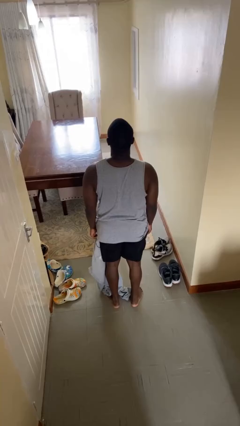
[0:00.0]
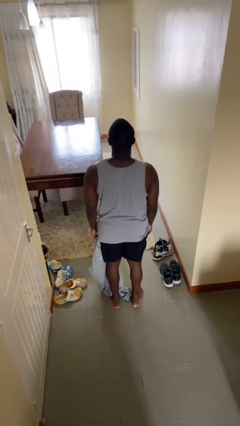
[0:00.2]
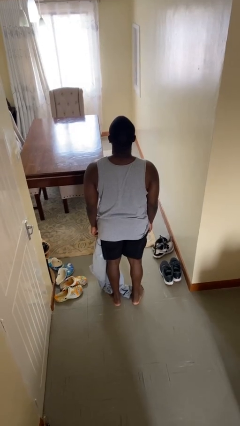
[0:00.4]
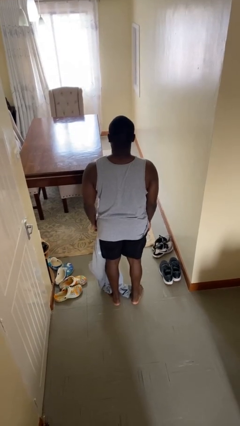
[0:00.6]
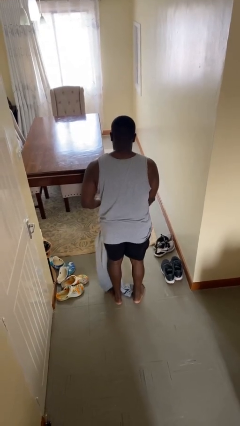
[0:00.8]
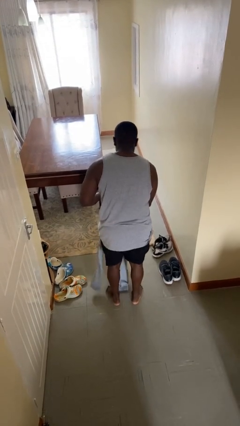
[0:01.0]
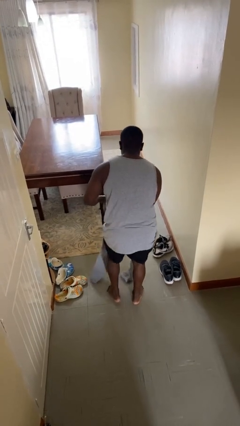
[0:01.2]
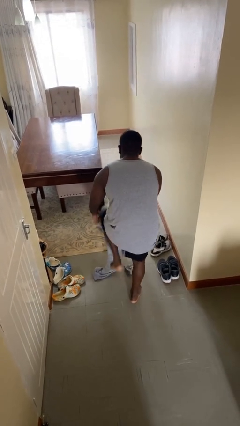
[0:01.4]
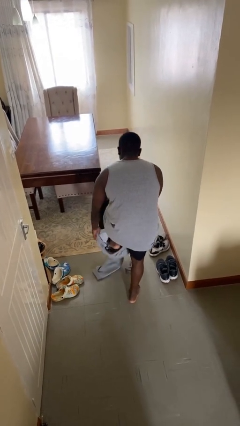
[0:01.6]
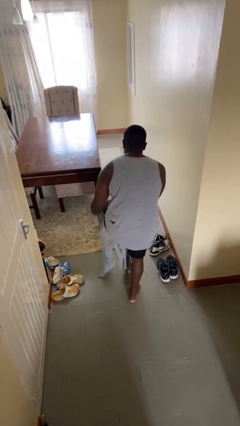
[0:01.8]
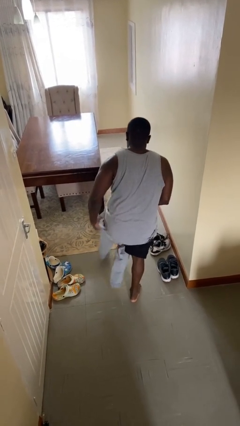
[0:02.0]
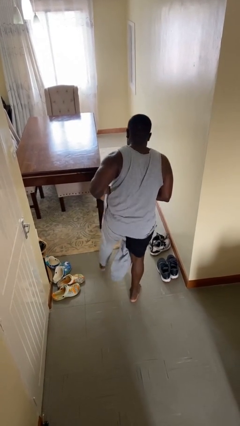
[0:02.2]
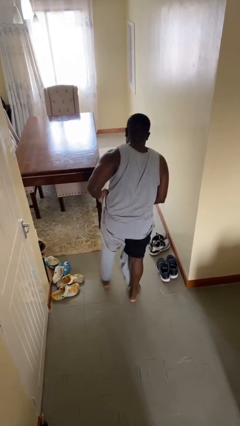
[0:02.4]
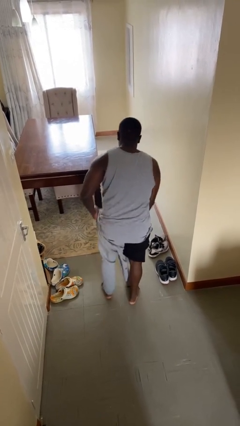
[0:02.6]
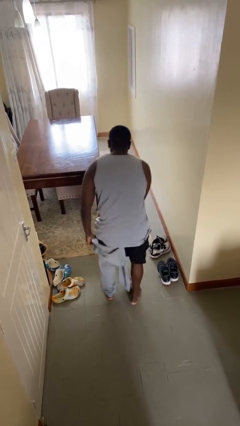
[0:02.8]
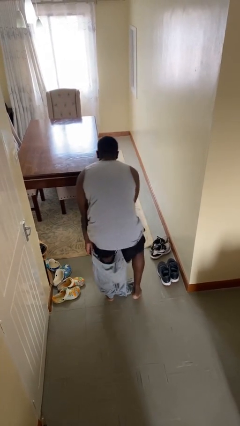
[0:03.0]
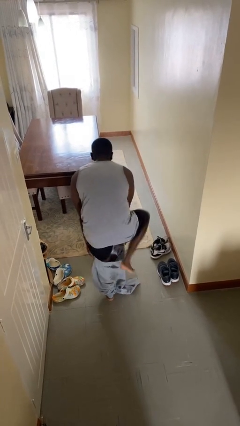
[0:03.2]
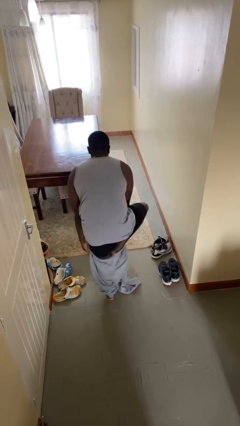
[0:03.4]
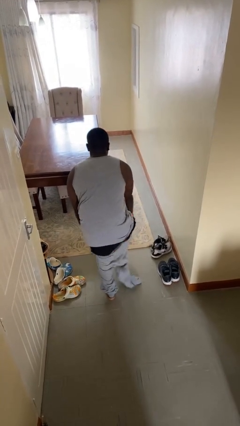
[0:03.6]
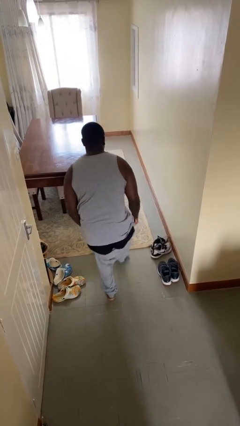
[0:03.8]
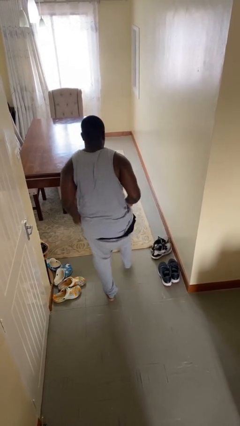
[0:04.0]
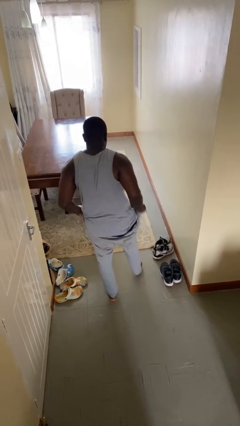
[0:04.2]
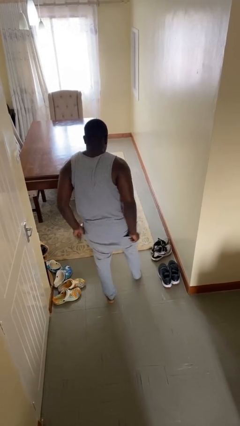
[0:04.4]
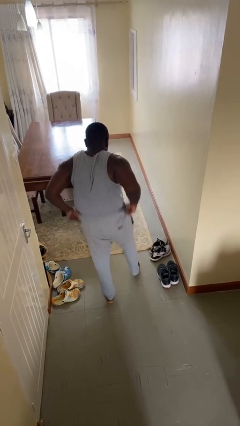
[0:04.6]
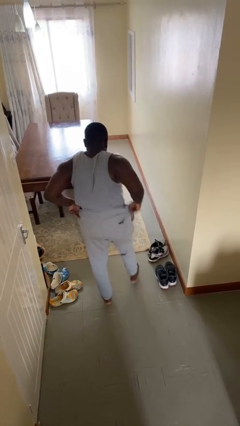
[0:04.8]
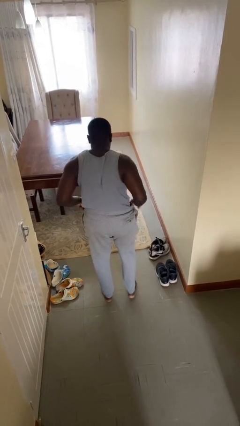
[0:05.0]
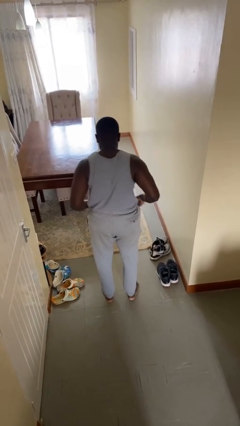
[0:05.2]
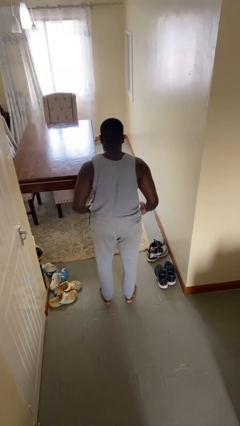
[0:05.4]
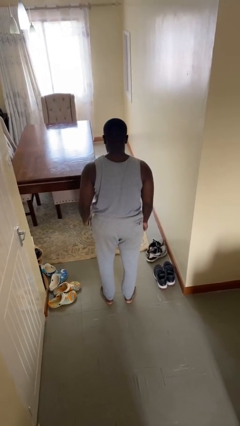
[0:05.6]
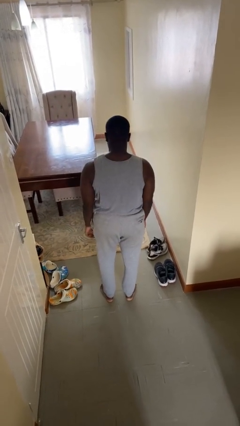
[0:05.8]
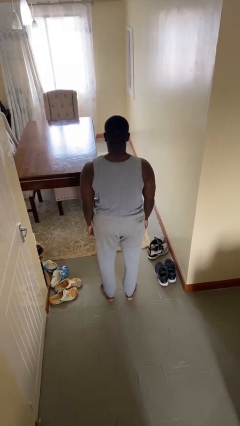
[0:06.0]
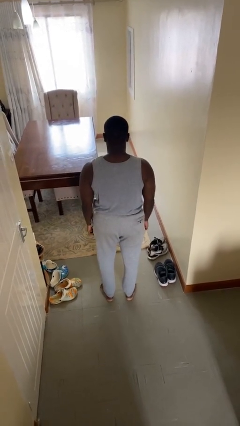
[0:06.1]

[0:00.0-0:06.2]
person puts on pants

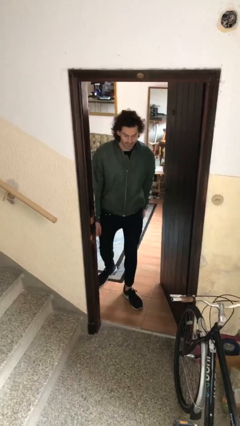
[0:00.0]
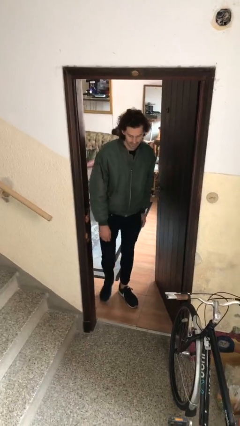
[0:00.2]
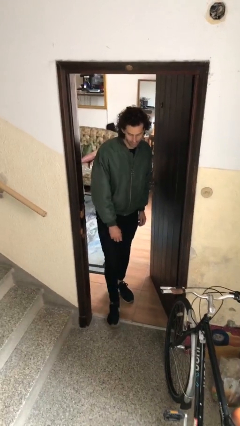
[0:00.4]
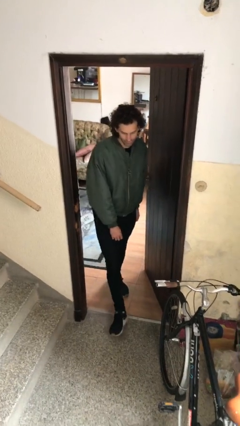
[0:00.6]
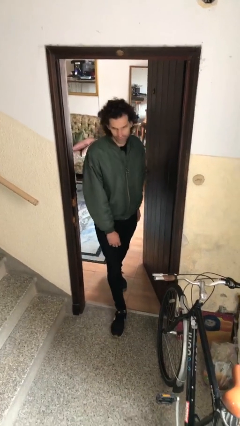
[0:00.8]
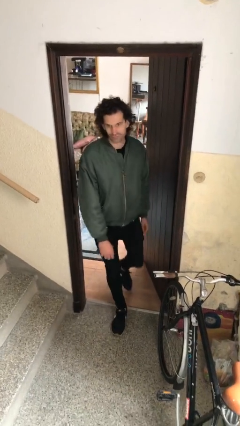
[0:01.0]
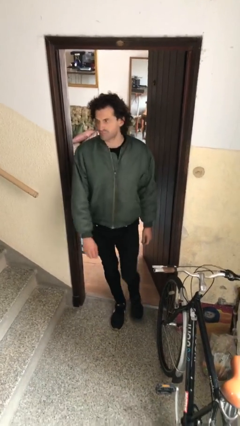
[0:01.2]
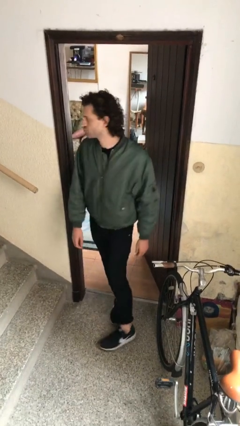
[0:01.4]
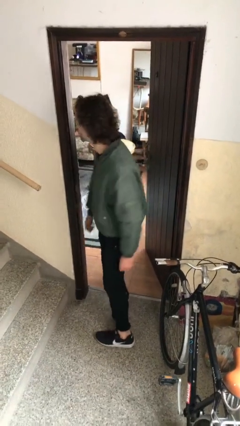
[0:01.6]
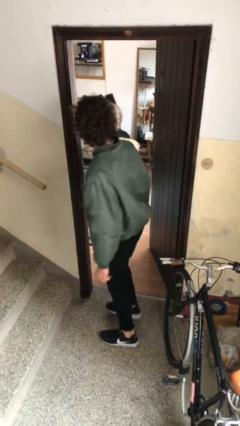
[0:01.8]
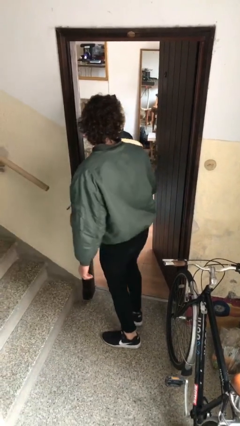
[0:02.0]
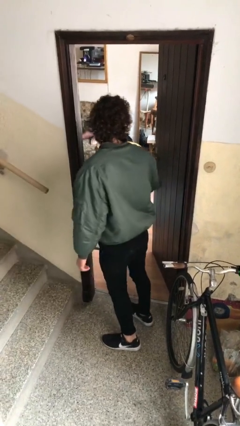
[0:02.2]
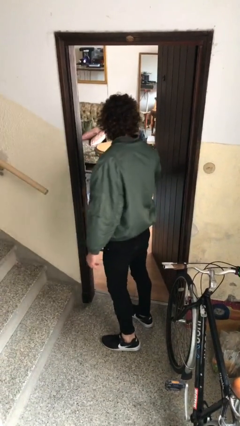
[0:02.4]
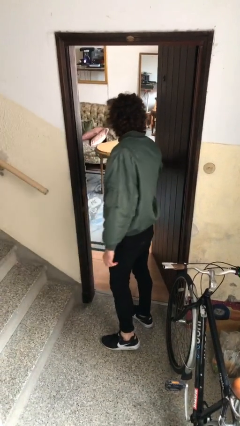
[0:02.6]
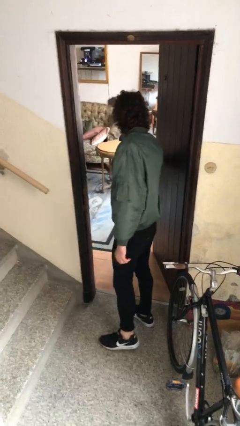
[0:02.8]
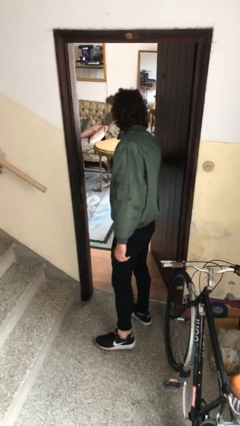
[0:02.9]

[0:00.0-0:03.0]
person enters scene through structure

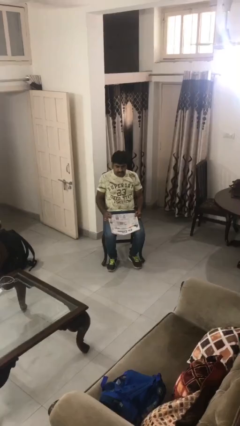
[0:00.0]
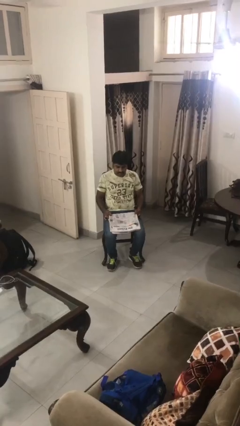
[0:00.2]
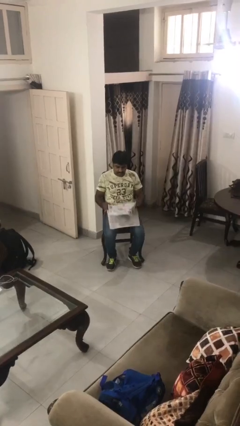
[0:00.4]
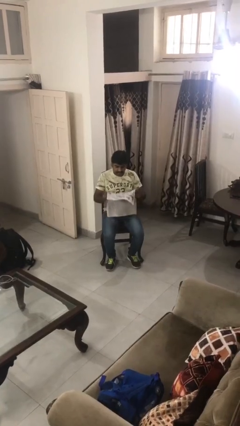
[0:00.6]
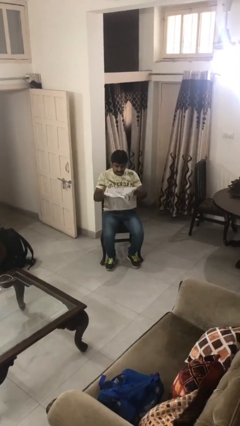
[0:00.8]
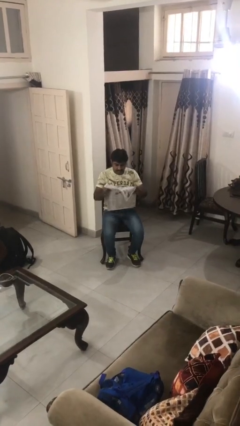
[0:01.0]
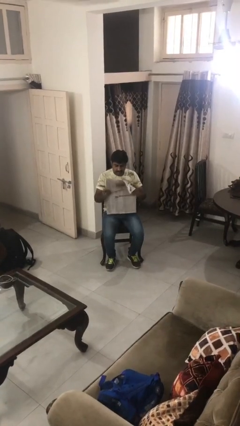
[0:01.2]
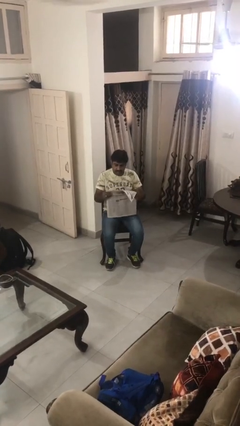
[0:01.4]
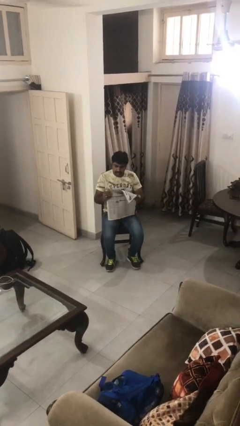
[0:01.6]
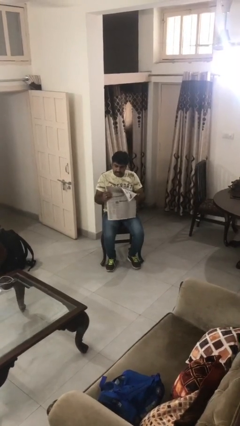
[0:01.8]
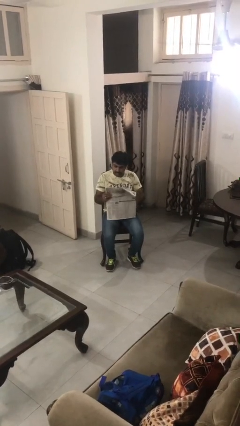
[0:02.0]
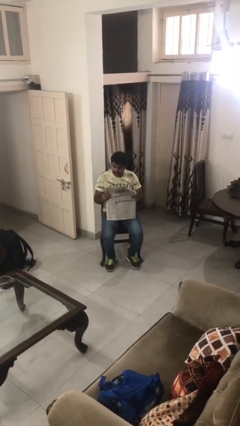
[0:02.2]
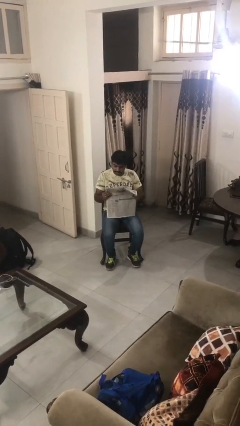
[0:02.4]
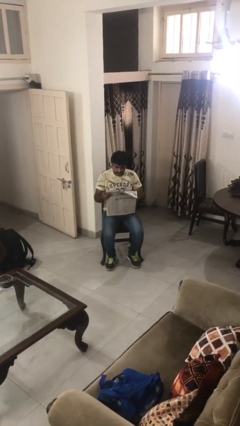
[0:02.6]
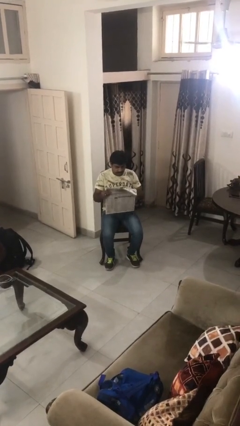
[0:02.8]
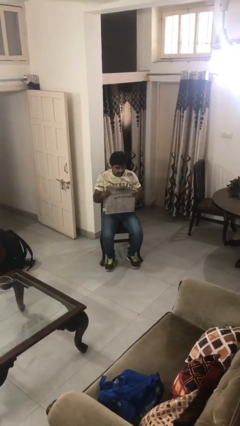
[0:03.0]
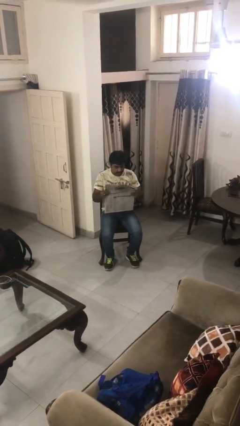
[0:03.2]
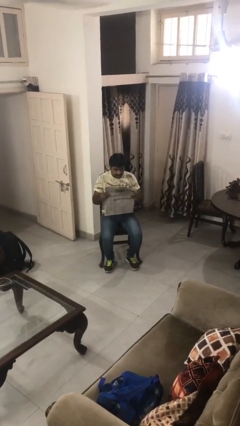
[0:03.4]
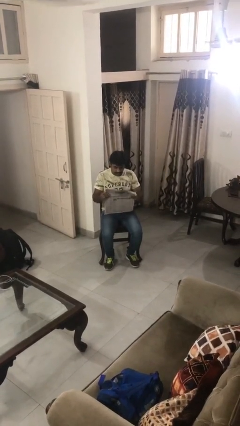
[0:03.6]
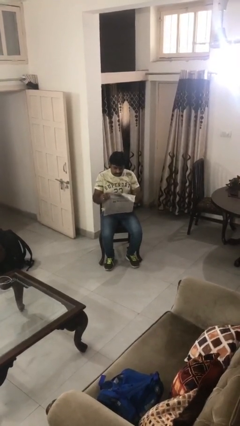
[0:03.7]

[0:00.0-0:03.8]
person reads newspaper

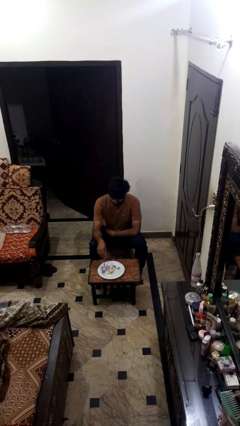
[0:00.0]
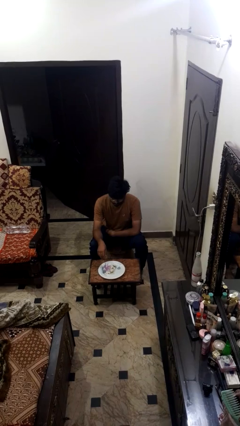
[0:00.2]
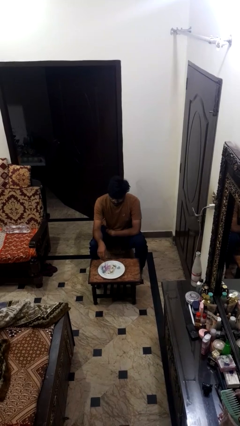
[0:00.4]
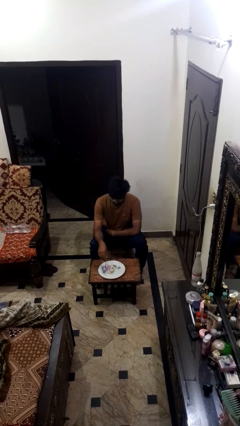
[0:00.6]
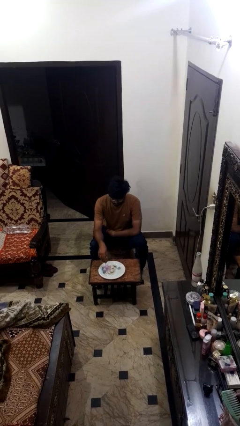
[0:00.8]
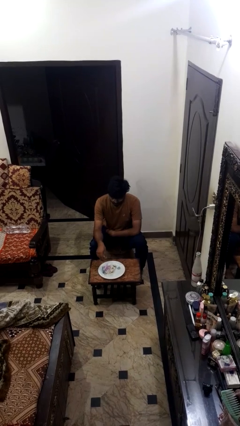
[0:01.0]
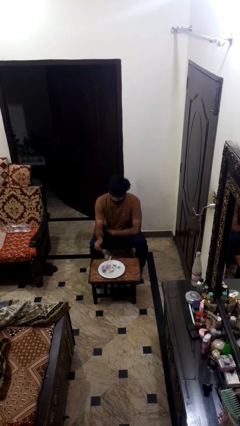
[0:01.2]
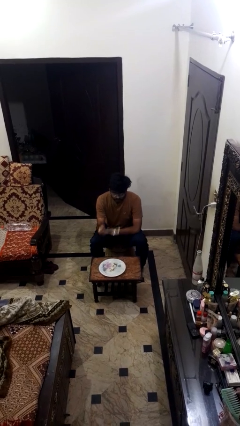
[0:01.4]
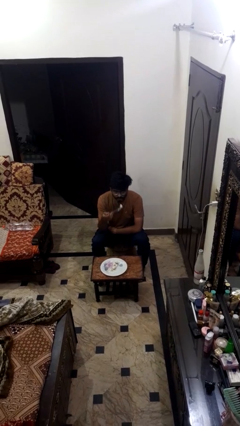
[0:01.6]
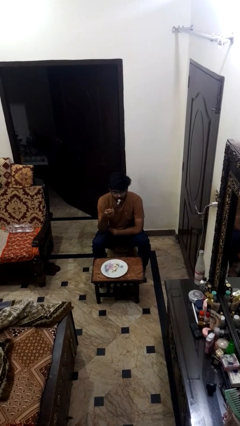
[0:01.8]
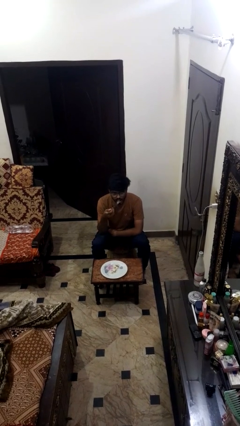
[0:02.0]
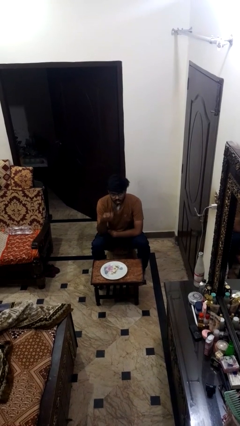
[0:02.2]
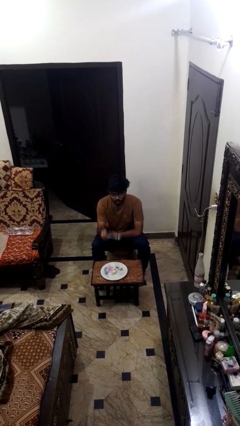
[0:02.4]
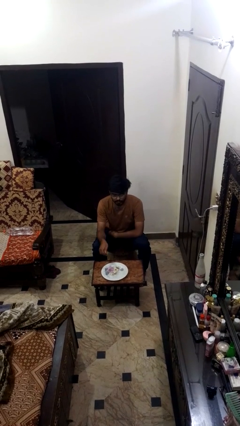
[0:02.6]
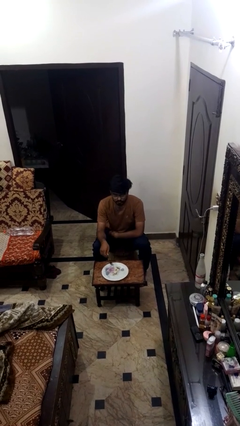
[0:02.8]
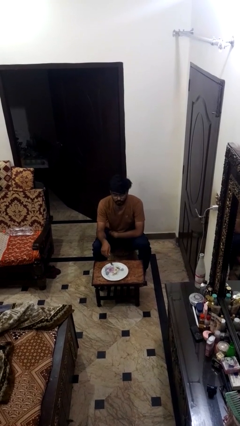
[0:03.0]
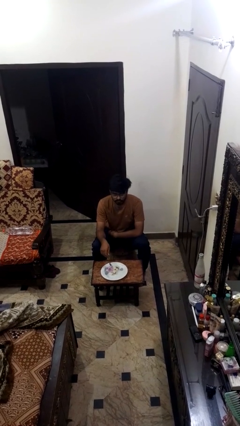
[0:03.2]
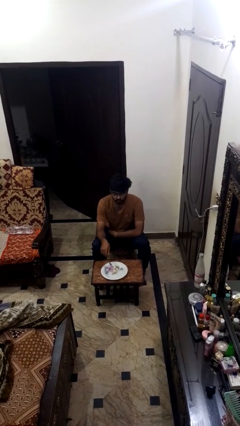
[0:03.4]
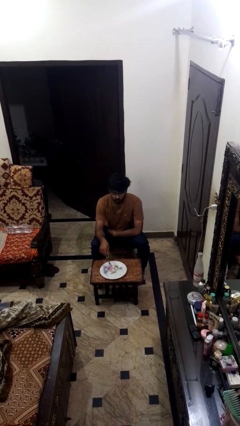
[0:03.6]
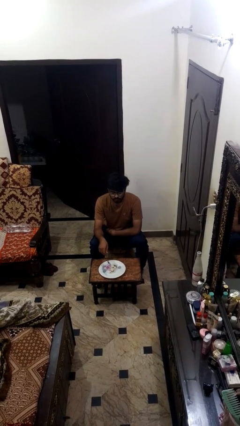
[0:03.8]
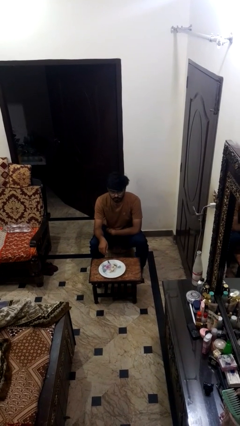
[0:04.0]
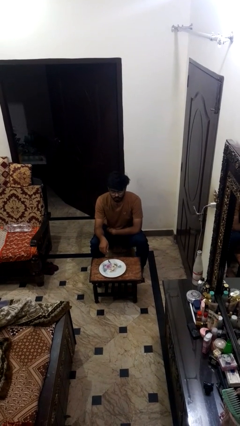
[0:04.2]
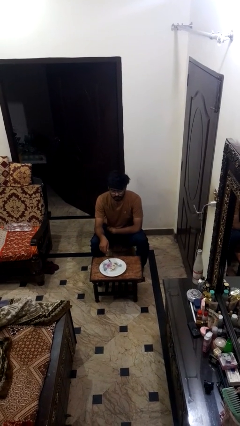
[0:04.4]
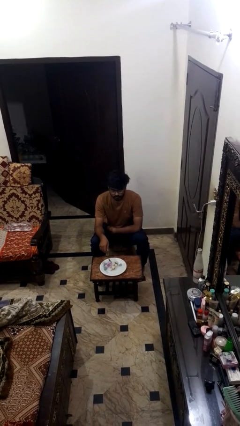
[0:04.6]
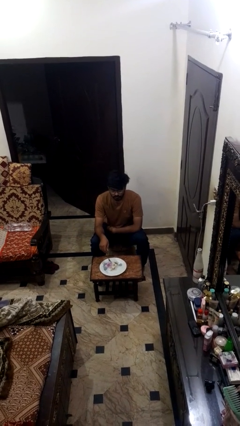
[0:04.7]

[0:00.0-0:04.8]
person eats with utensil

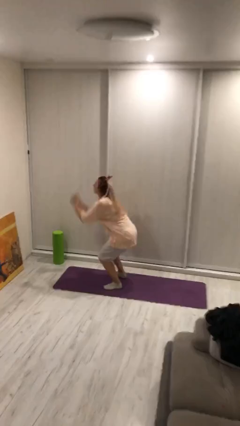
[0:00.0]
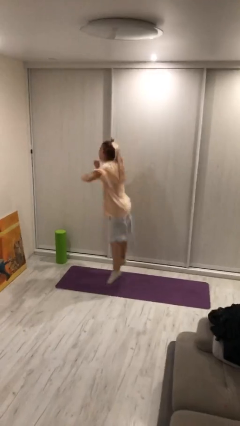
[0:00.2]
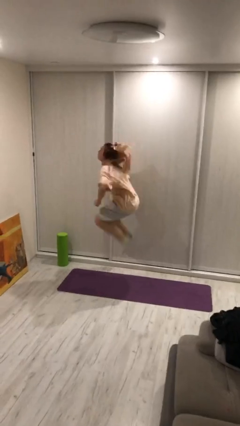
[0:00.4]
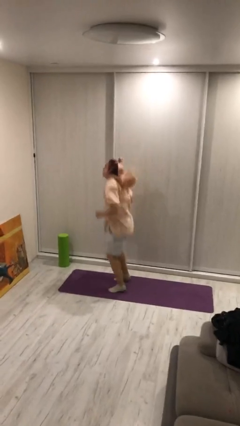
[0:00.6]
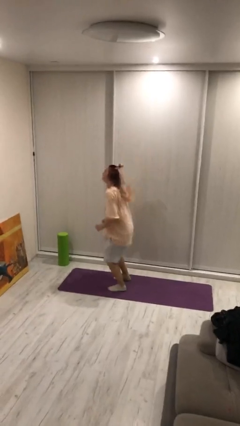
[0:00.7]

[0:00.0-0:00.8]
person jumps
